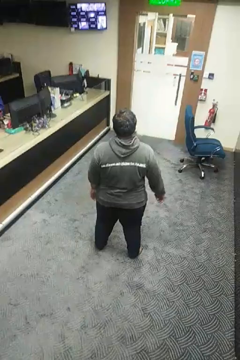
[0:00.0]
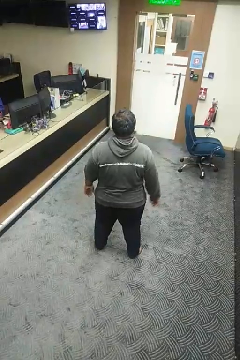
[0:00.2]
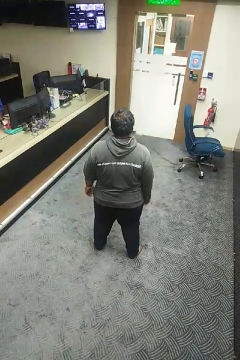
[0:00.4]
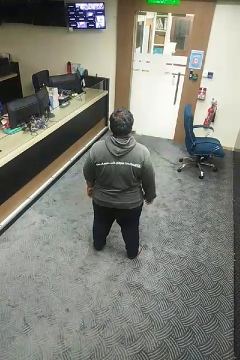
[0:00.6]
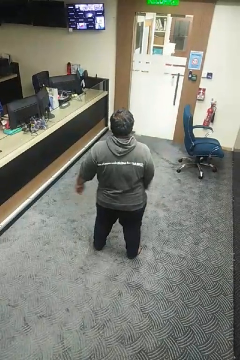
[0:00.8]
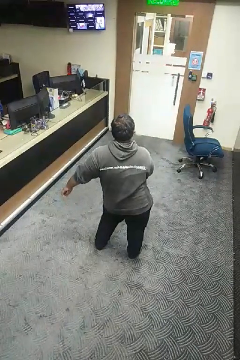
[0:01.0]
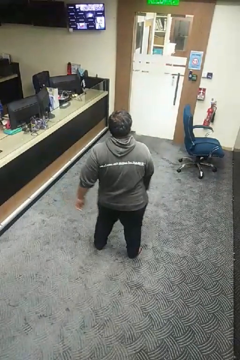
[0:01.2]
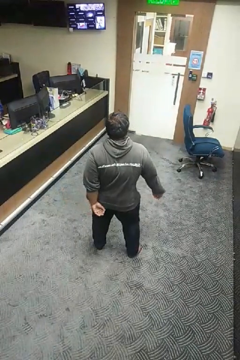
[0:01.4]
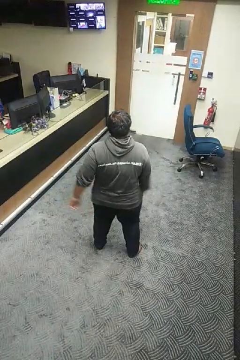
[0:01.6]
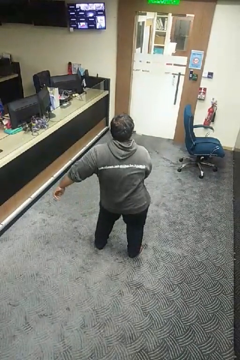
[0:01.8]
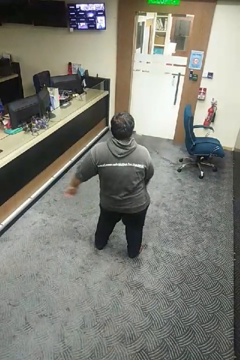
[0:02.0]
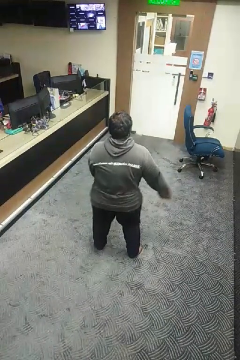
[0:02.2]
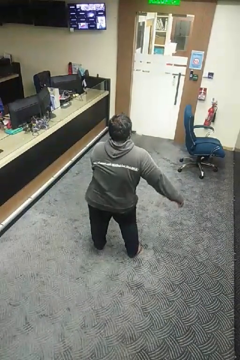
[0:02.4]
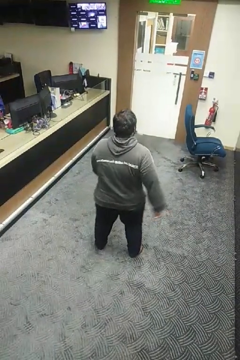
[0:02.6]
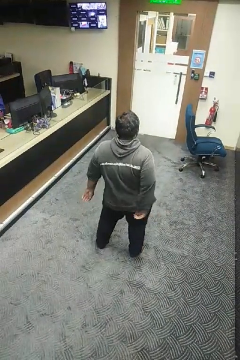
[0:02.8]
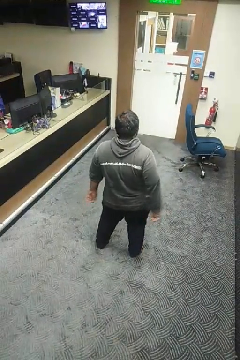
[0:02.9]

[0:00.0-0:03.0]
person dances in place

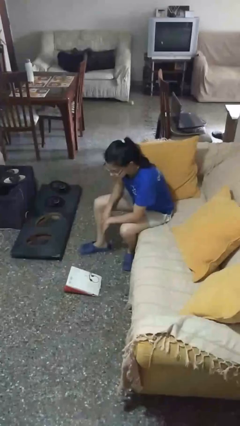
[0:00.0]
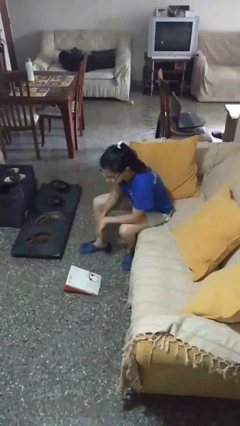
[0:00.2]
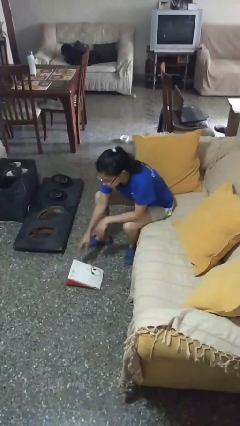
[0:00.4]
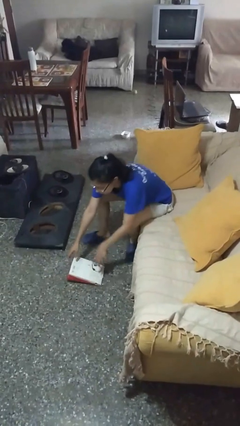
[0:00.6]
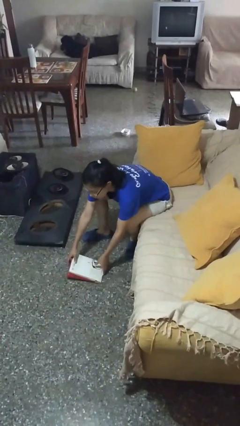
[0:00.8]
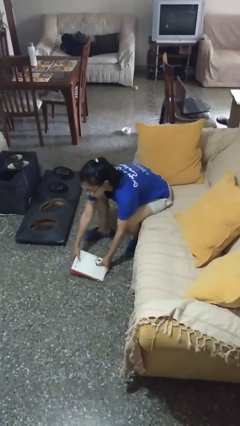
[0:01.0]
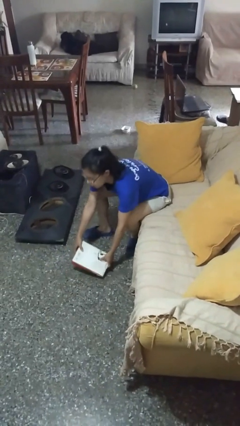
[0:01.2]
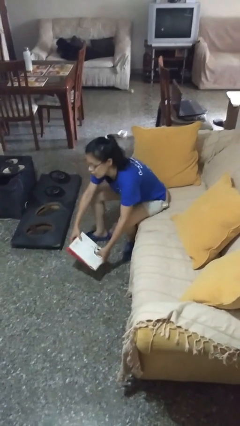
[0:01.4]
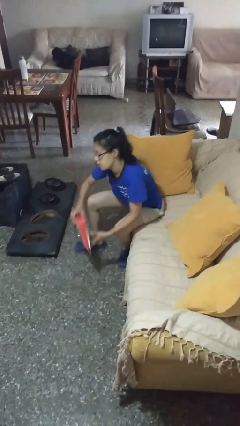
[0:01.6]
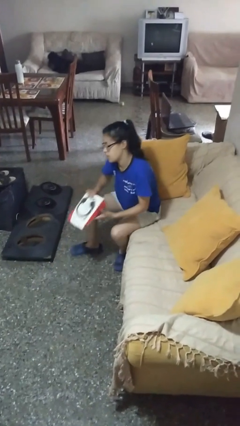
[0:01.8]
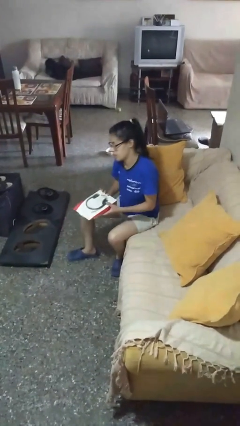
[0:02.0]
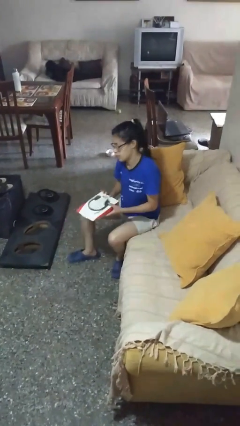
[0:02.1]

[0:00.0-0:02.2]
person picks up object from floor

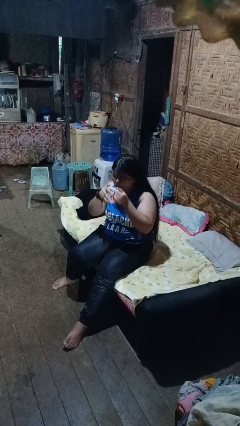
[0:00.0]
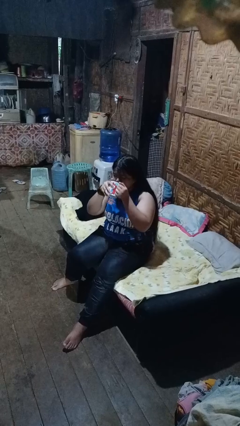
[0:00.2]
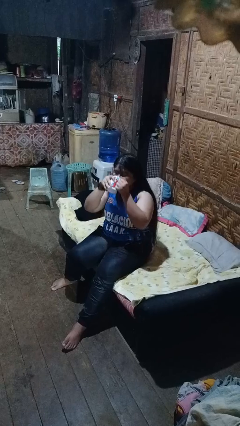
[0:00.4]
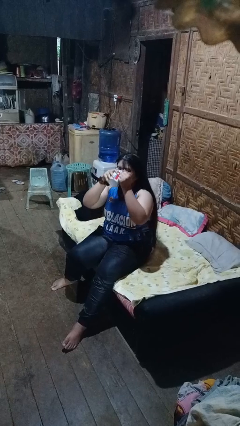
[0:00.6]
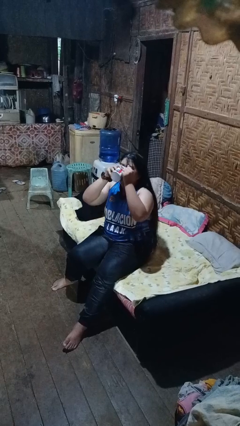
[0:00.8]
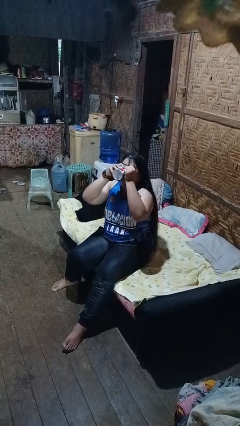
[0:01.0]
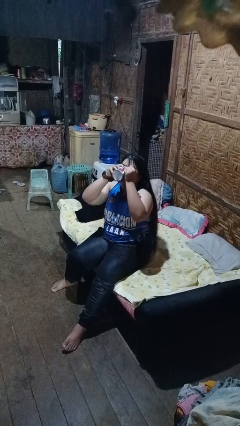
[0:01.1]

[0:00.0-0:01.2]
person drinks from mug

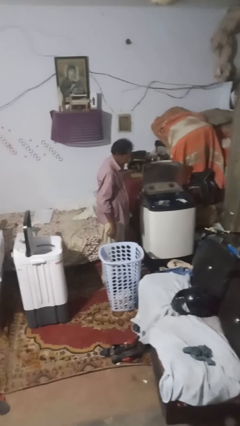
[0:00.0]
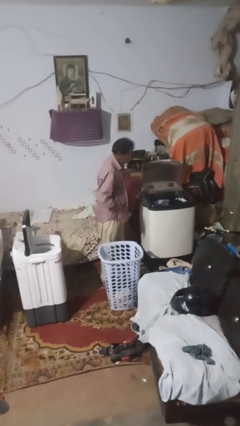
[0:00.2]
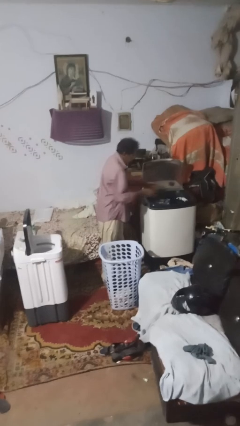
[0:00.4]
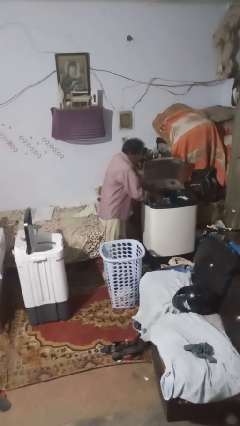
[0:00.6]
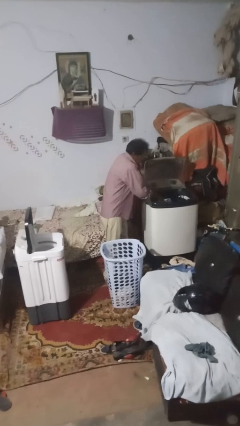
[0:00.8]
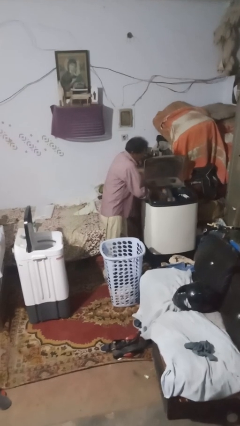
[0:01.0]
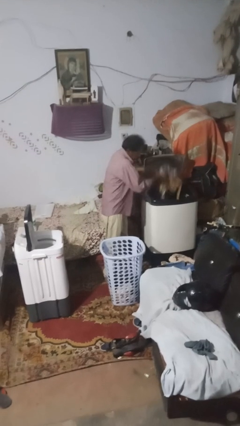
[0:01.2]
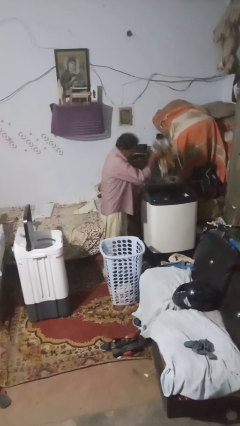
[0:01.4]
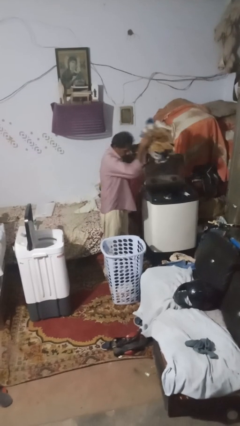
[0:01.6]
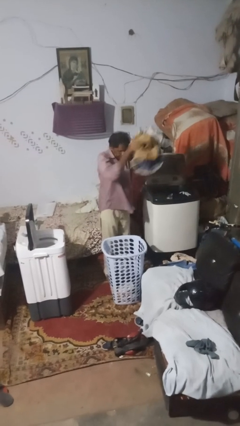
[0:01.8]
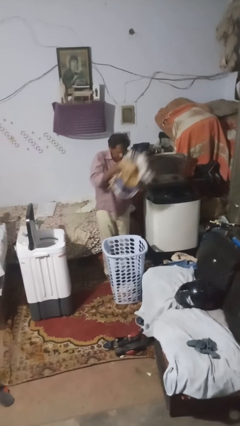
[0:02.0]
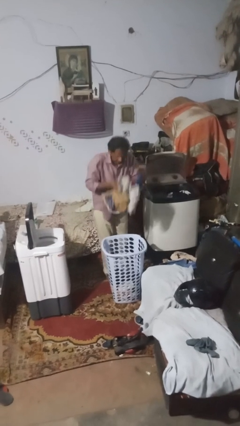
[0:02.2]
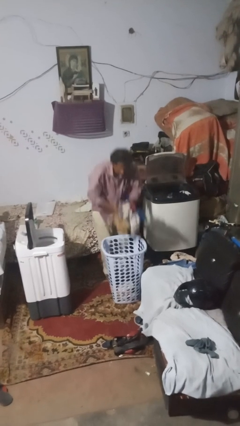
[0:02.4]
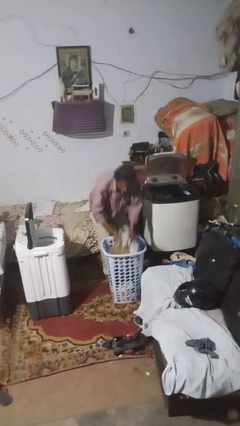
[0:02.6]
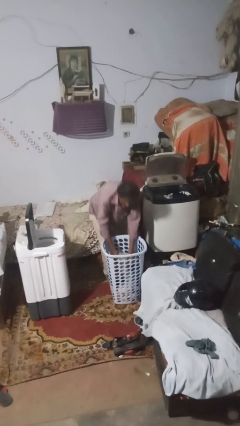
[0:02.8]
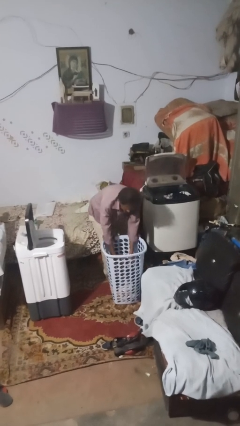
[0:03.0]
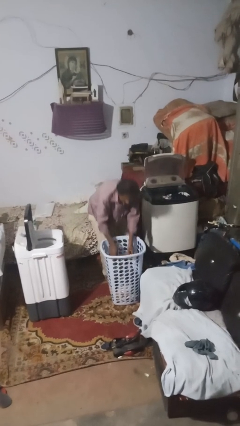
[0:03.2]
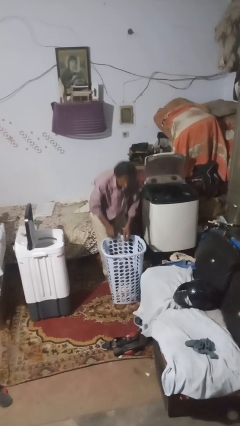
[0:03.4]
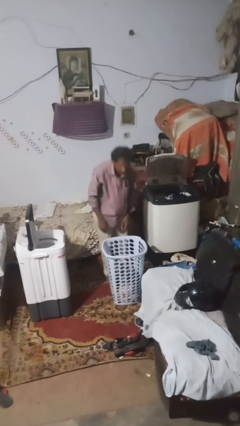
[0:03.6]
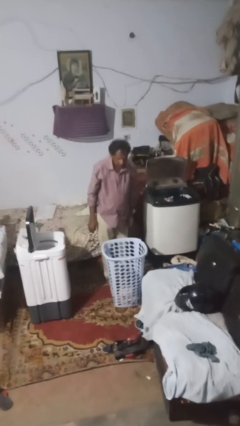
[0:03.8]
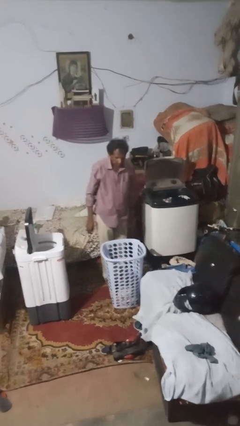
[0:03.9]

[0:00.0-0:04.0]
person unloads clotheswasher

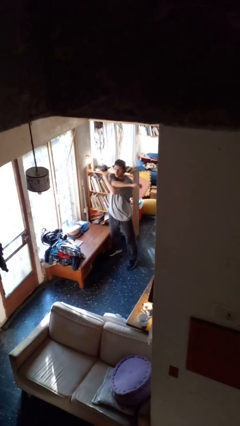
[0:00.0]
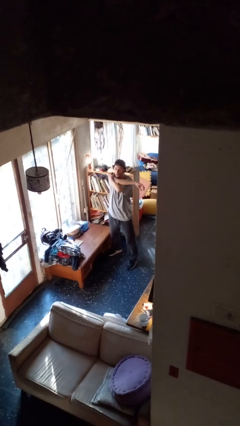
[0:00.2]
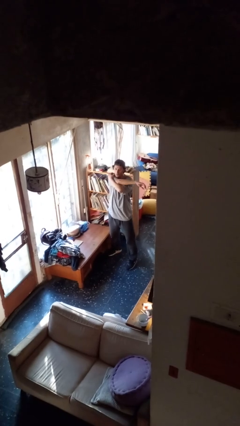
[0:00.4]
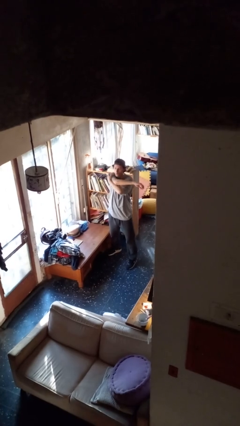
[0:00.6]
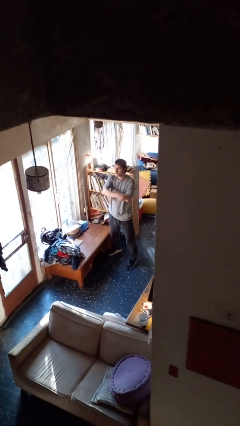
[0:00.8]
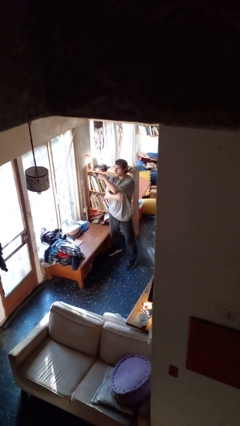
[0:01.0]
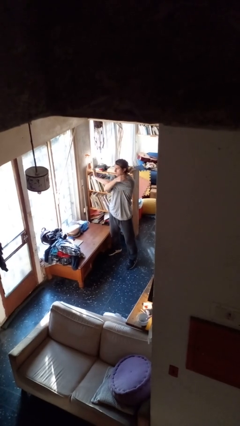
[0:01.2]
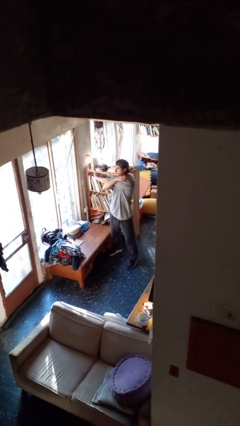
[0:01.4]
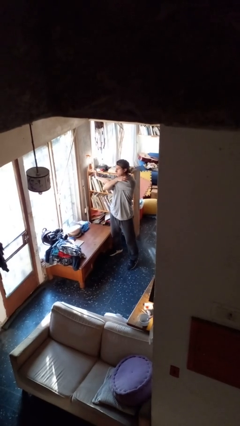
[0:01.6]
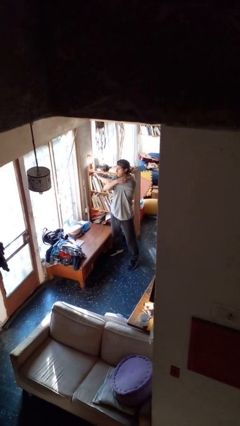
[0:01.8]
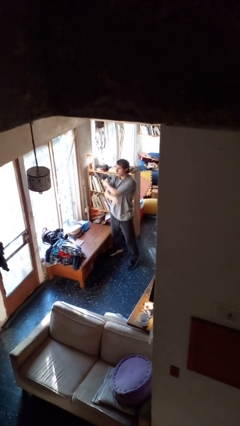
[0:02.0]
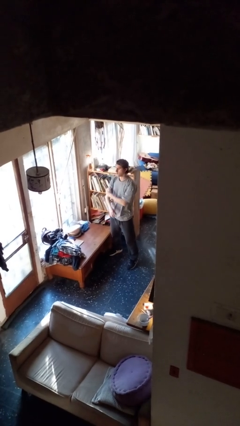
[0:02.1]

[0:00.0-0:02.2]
person stretches arms to side

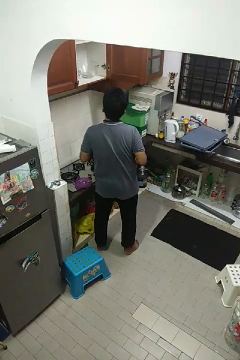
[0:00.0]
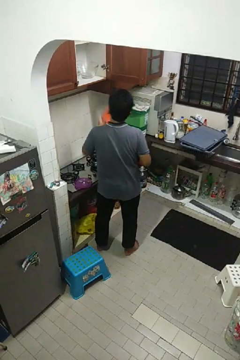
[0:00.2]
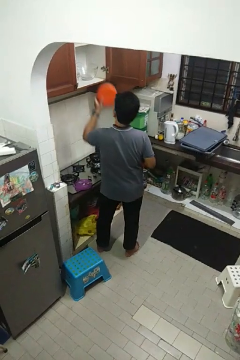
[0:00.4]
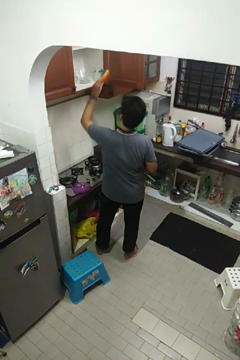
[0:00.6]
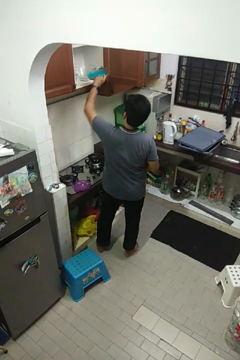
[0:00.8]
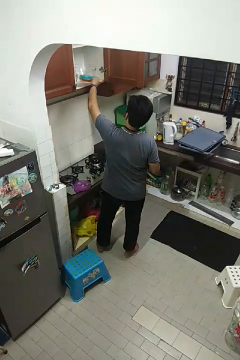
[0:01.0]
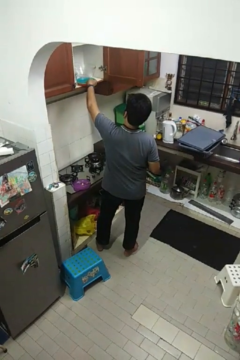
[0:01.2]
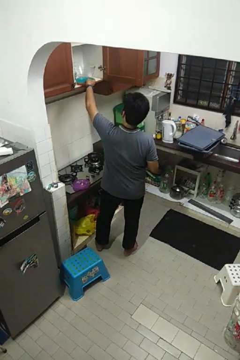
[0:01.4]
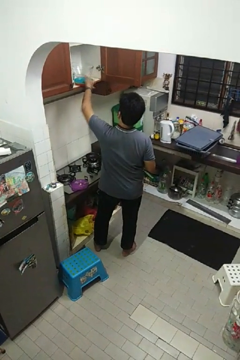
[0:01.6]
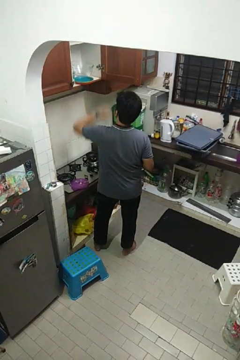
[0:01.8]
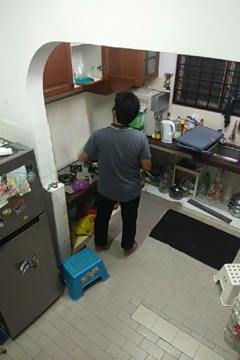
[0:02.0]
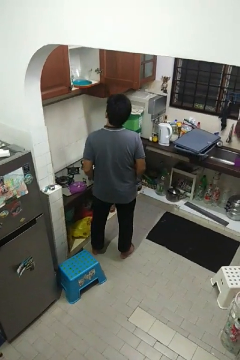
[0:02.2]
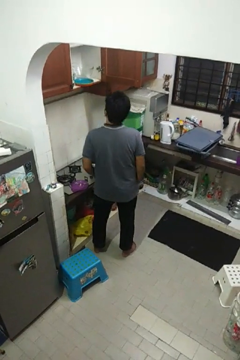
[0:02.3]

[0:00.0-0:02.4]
person puts object in cabinet

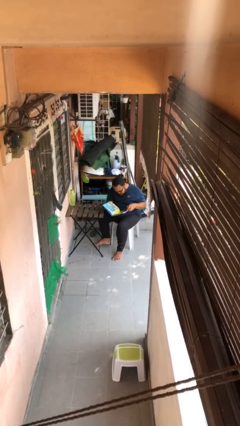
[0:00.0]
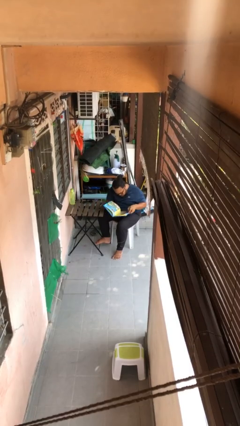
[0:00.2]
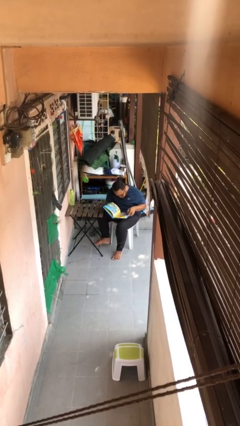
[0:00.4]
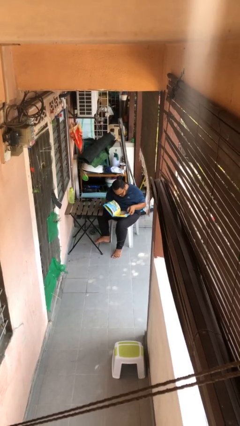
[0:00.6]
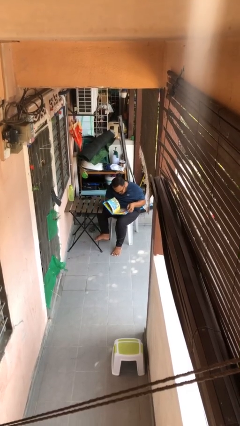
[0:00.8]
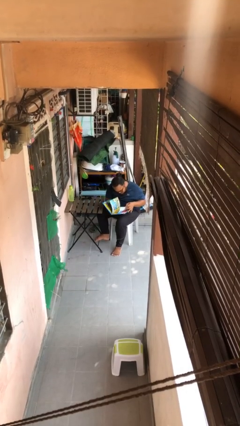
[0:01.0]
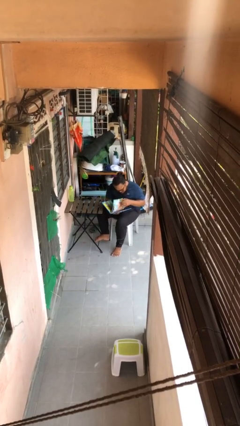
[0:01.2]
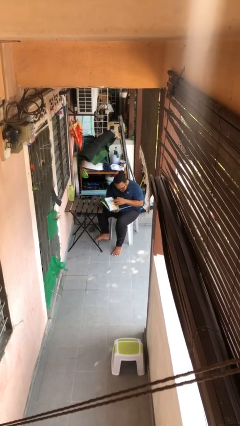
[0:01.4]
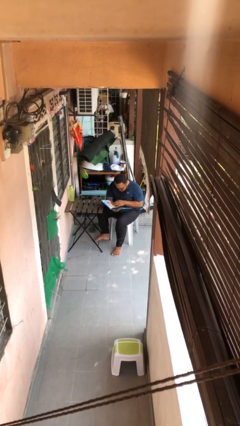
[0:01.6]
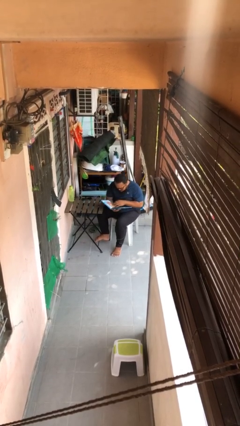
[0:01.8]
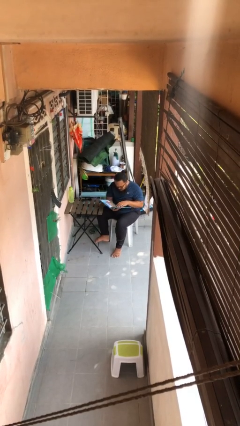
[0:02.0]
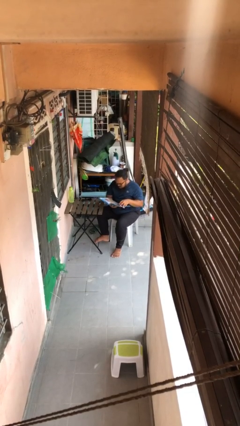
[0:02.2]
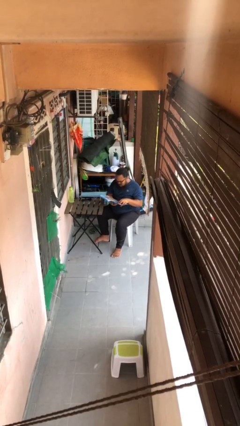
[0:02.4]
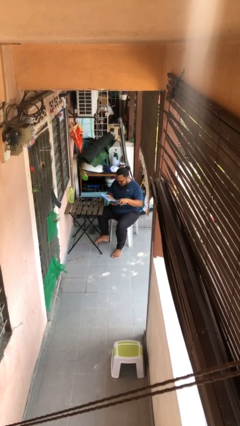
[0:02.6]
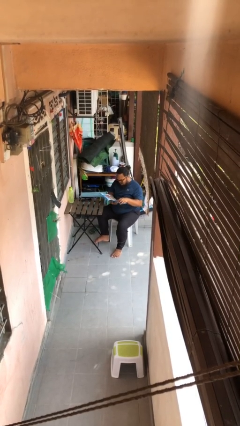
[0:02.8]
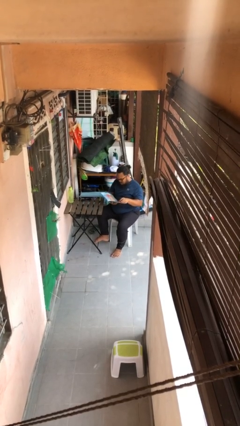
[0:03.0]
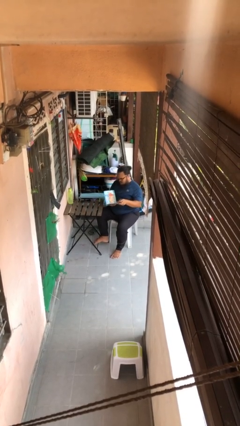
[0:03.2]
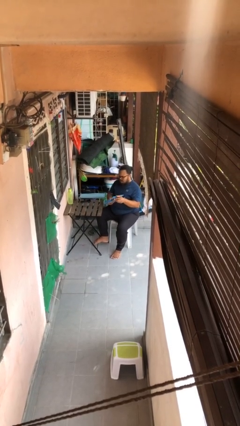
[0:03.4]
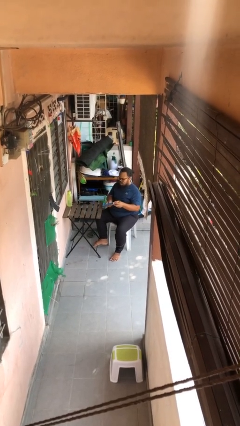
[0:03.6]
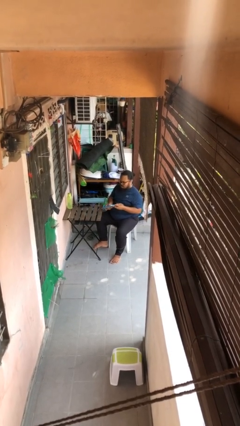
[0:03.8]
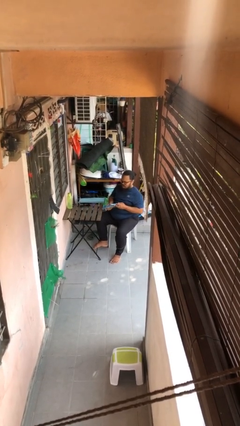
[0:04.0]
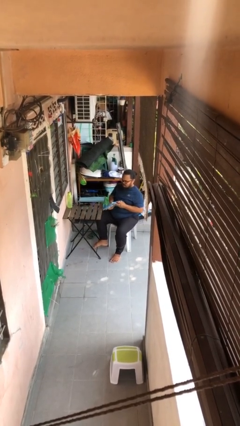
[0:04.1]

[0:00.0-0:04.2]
person reads document
